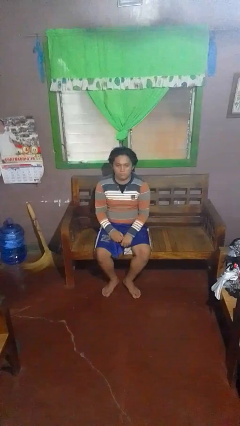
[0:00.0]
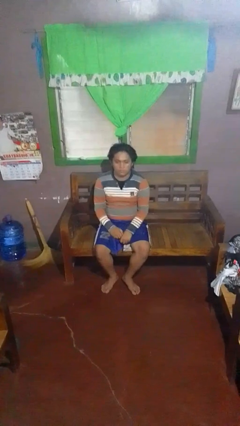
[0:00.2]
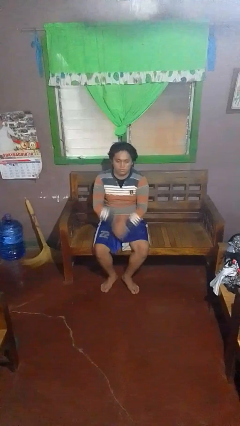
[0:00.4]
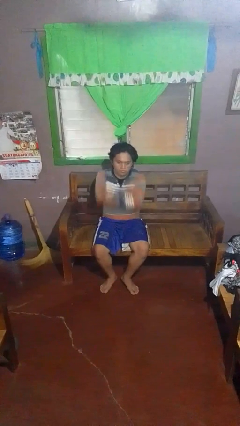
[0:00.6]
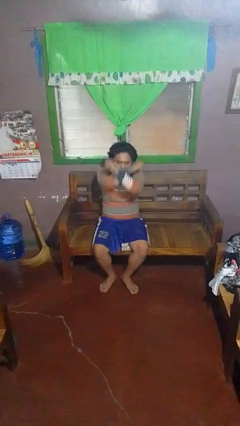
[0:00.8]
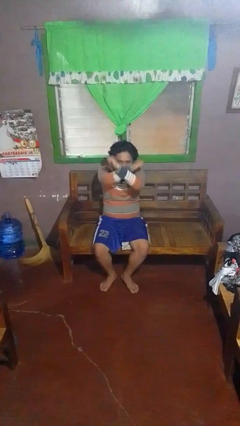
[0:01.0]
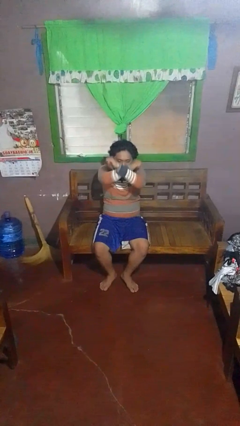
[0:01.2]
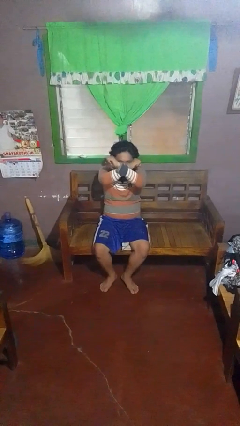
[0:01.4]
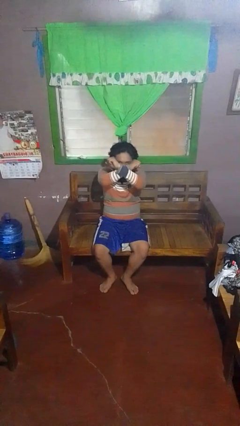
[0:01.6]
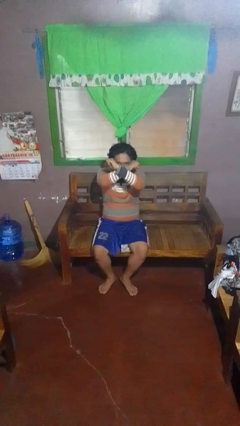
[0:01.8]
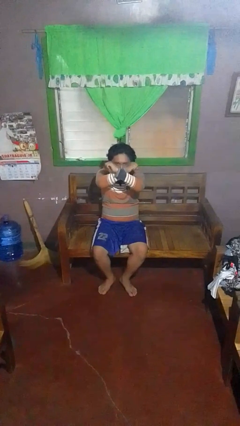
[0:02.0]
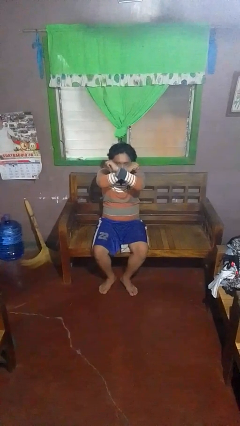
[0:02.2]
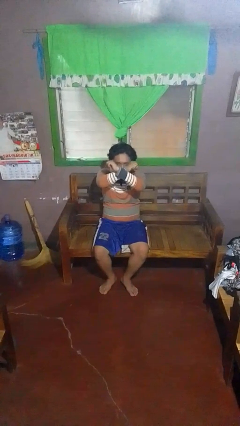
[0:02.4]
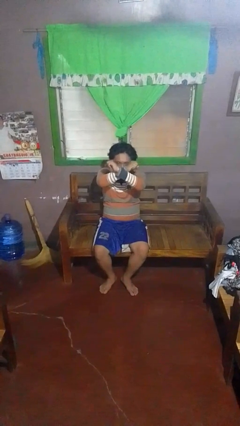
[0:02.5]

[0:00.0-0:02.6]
person gestures arms x

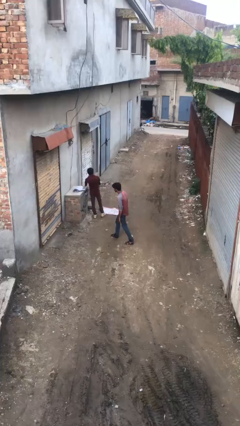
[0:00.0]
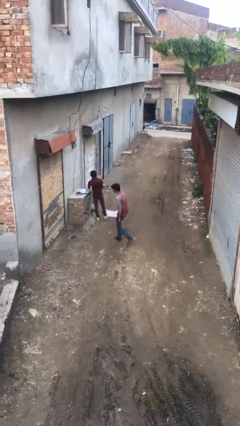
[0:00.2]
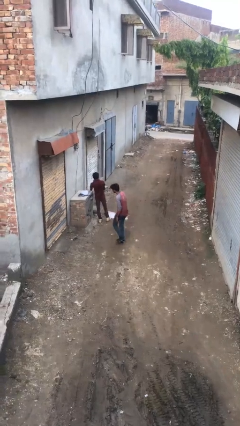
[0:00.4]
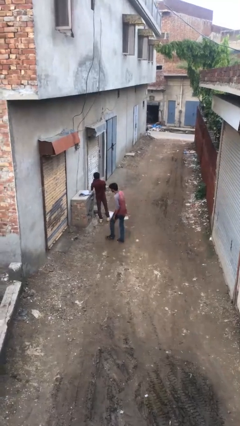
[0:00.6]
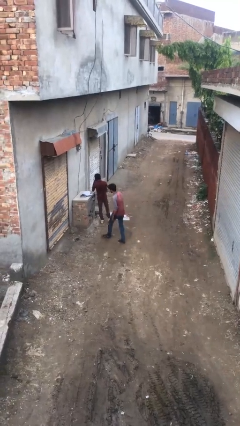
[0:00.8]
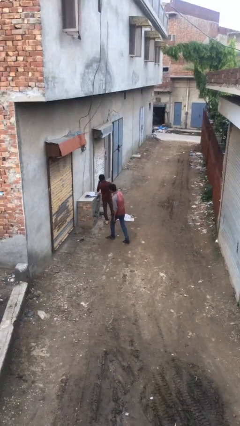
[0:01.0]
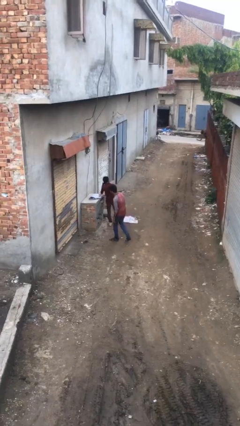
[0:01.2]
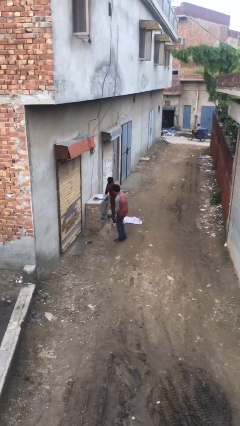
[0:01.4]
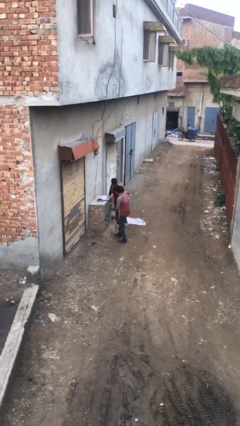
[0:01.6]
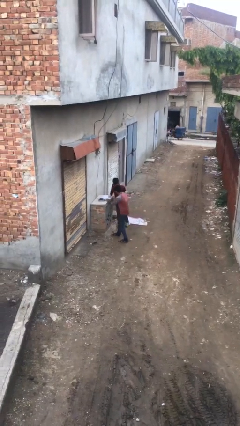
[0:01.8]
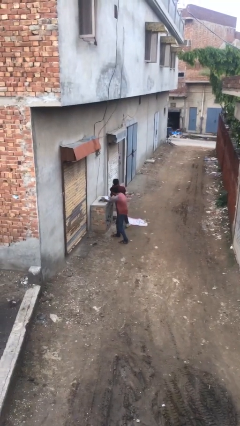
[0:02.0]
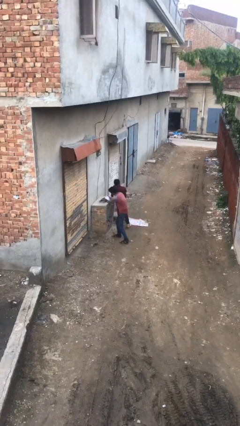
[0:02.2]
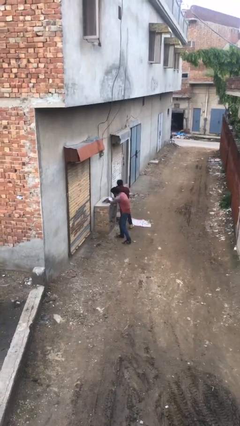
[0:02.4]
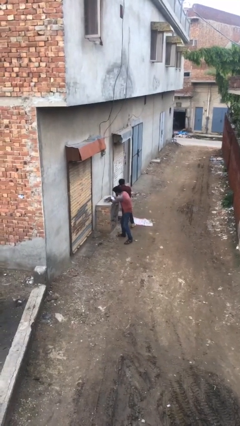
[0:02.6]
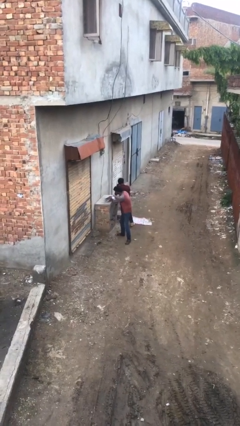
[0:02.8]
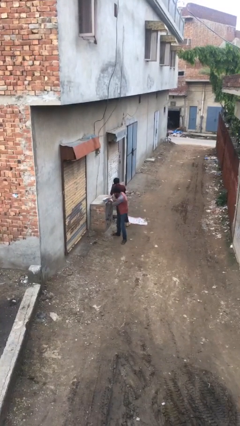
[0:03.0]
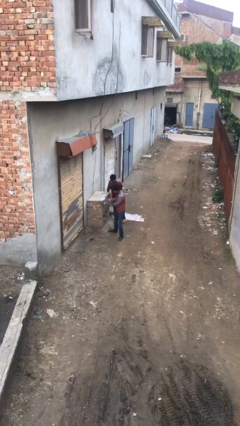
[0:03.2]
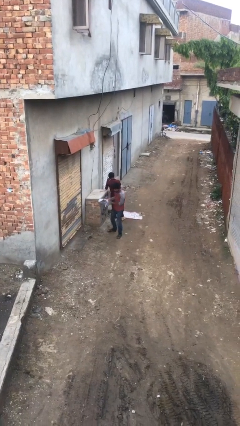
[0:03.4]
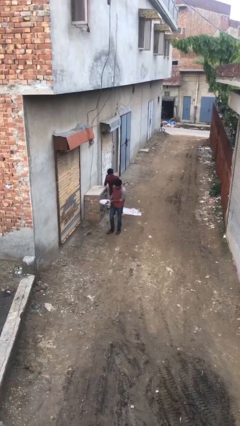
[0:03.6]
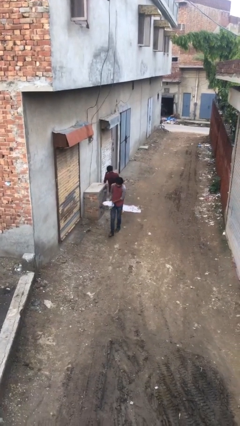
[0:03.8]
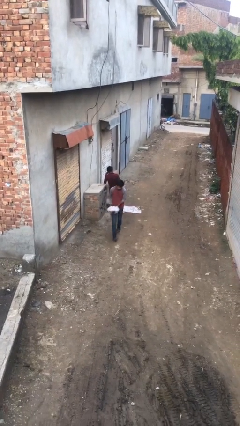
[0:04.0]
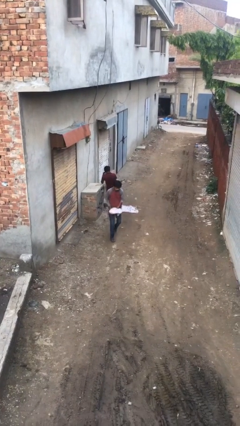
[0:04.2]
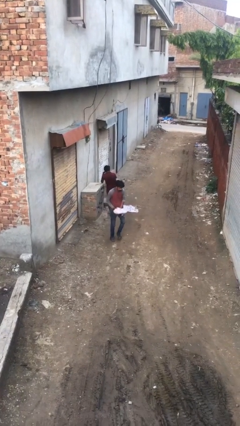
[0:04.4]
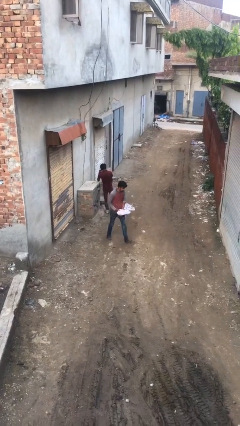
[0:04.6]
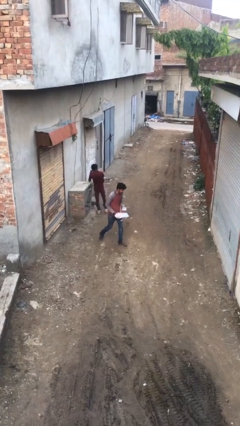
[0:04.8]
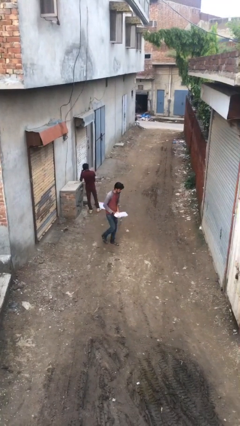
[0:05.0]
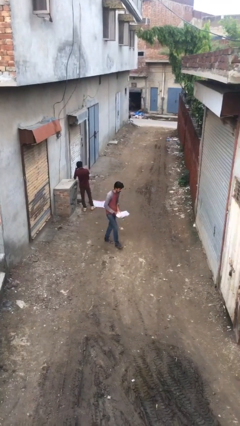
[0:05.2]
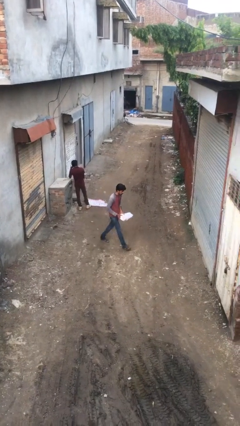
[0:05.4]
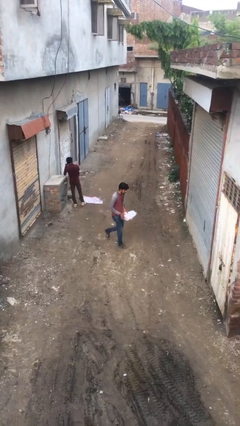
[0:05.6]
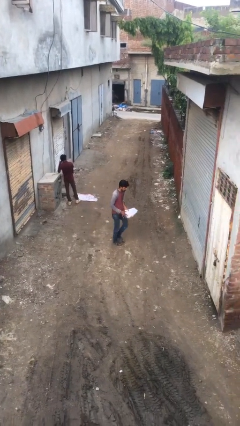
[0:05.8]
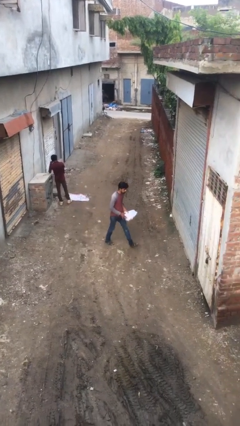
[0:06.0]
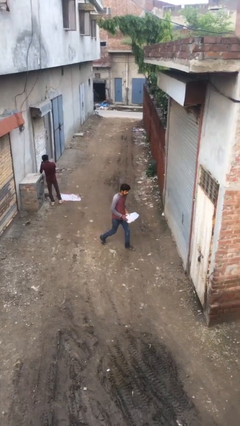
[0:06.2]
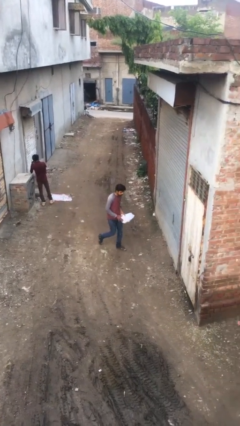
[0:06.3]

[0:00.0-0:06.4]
person steals object from person

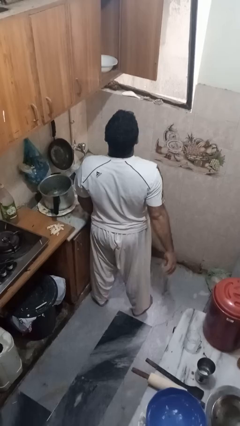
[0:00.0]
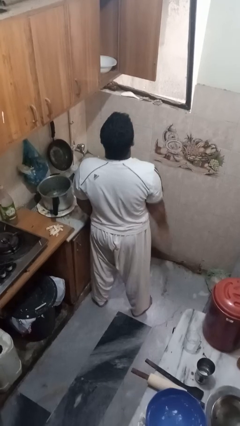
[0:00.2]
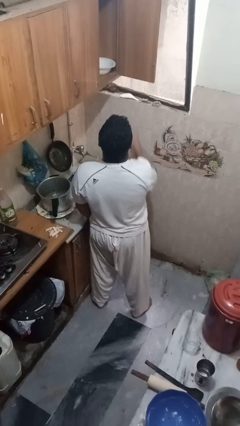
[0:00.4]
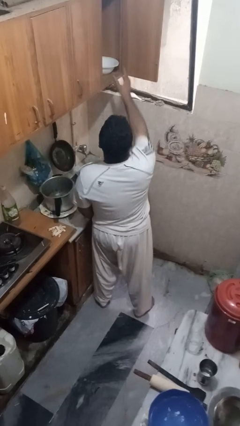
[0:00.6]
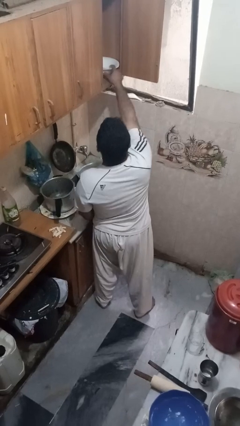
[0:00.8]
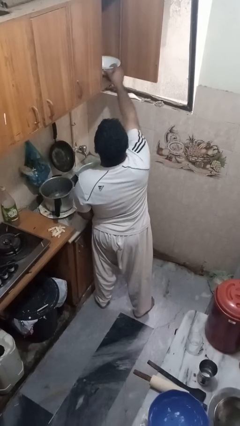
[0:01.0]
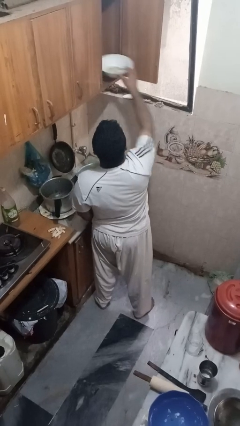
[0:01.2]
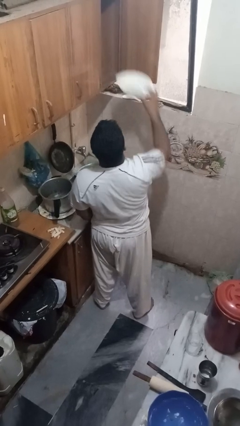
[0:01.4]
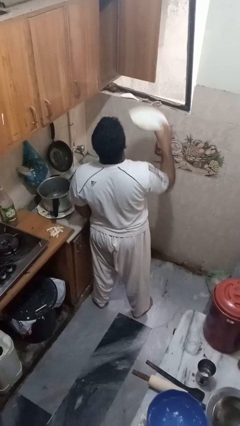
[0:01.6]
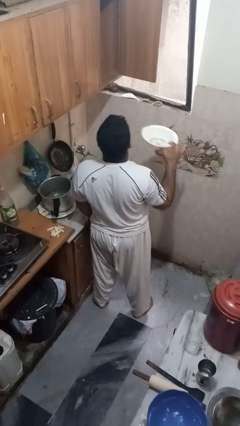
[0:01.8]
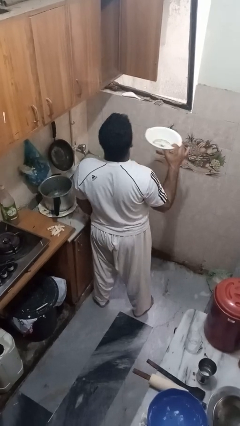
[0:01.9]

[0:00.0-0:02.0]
person takes object from cabinet

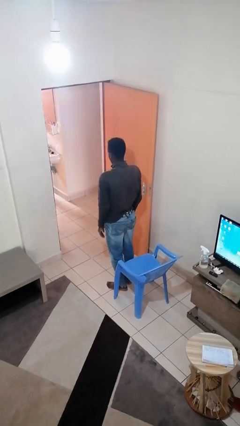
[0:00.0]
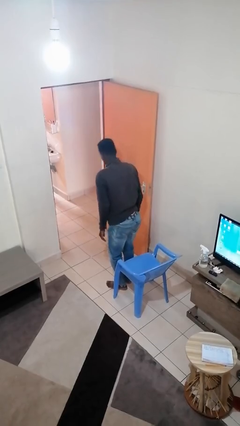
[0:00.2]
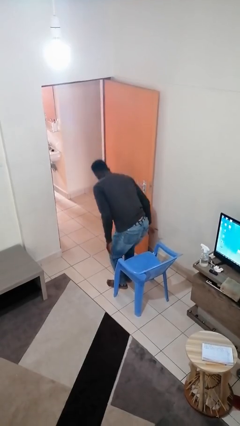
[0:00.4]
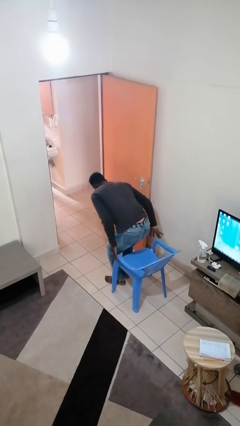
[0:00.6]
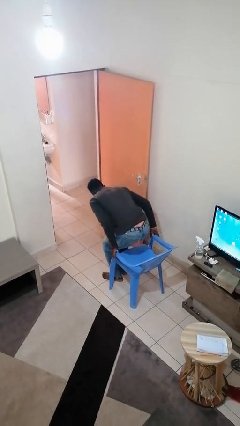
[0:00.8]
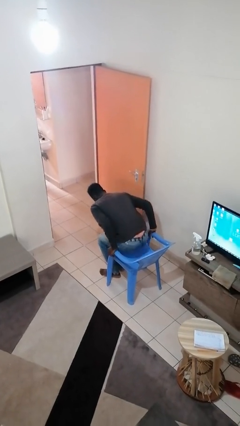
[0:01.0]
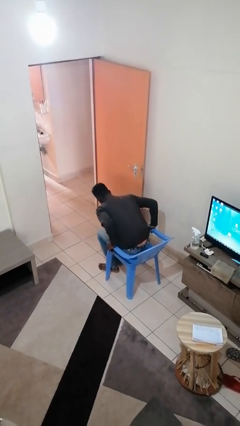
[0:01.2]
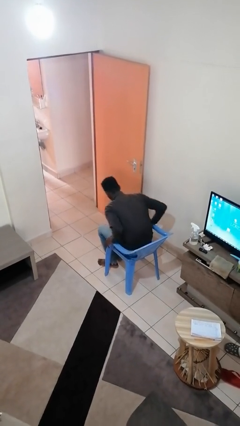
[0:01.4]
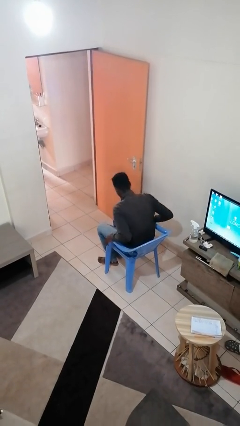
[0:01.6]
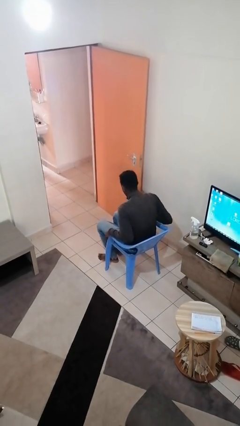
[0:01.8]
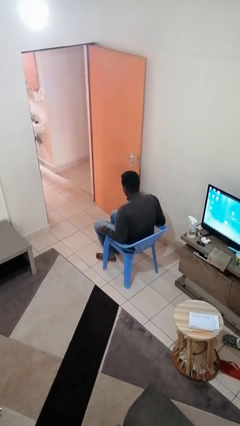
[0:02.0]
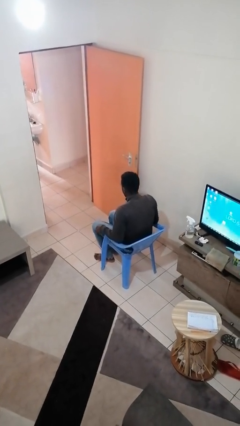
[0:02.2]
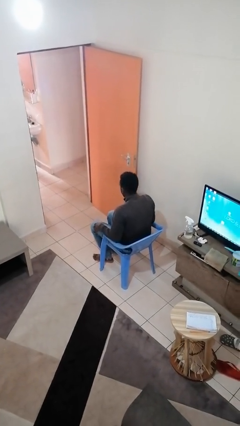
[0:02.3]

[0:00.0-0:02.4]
person sits down

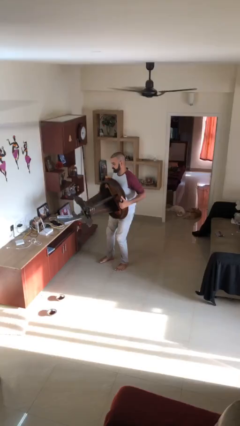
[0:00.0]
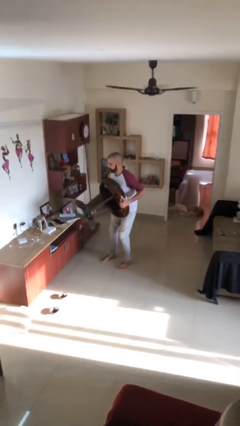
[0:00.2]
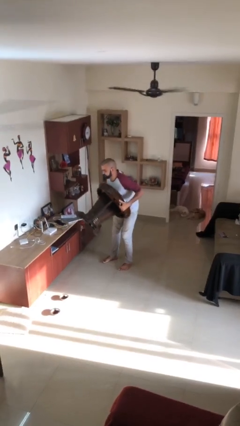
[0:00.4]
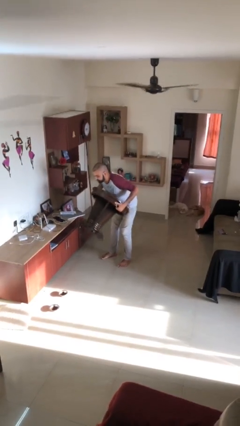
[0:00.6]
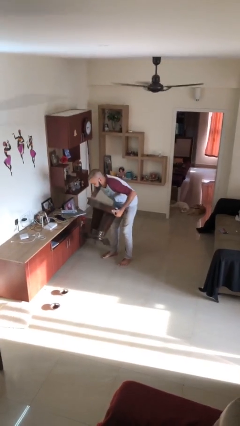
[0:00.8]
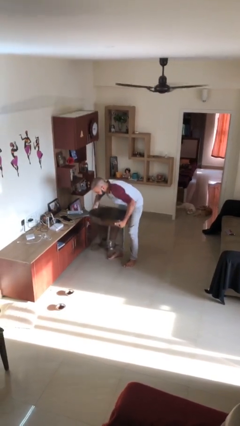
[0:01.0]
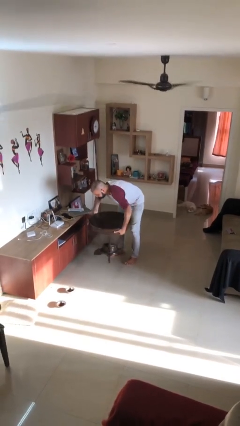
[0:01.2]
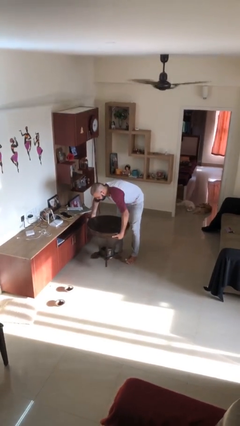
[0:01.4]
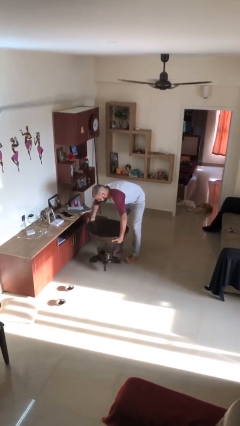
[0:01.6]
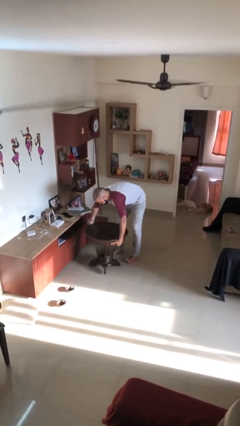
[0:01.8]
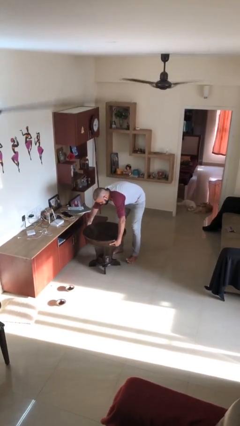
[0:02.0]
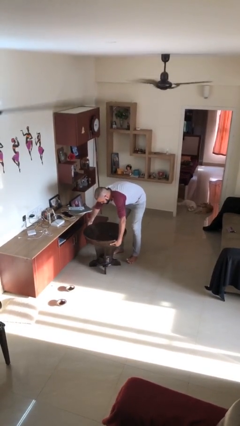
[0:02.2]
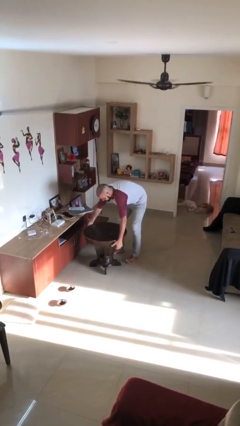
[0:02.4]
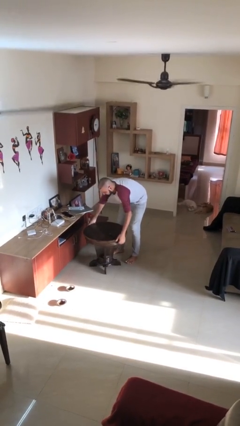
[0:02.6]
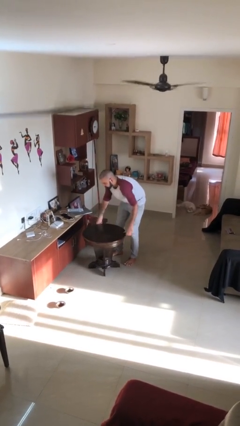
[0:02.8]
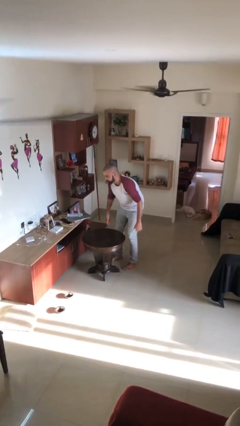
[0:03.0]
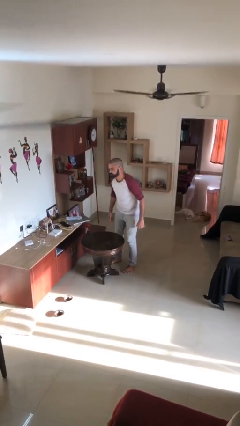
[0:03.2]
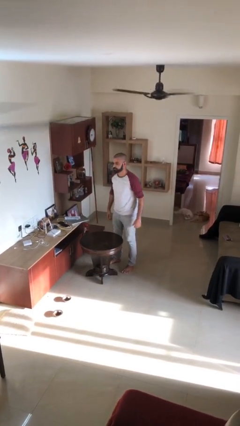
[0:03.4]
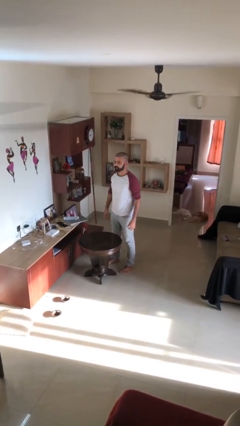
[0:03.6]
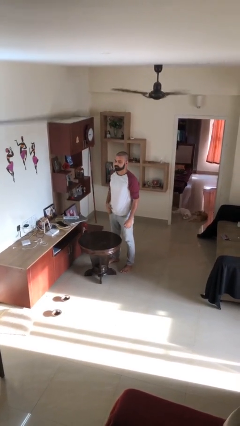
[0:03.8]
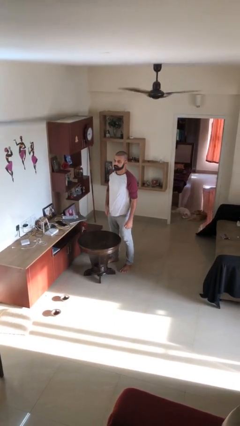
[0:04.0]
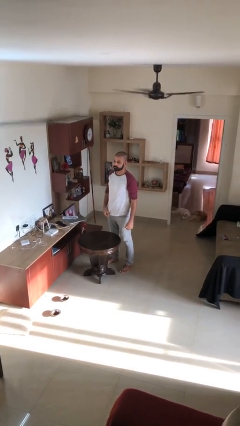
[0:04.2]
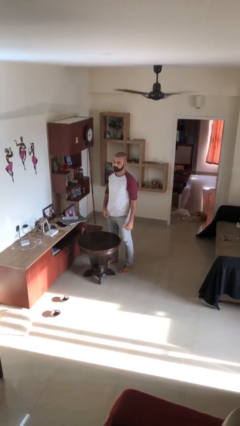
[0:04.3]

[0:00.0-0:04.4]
person puts down object on floor
